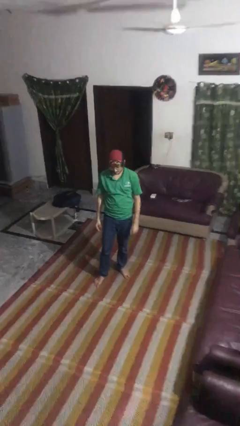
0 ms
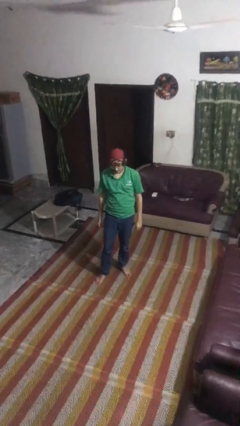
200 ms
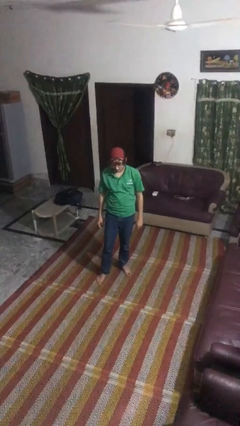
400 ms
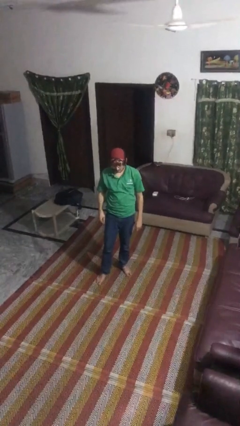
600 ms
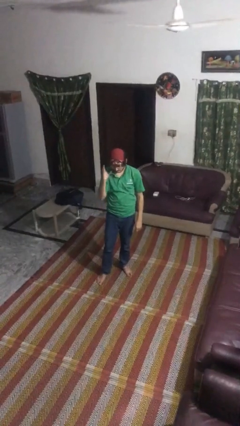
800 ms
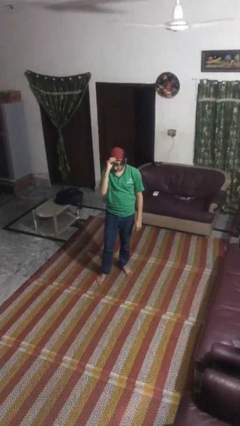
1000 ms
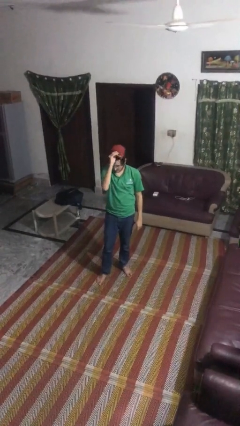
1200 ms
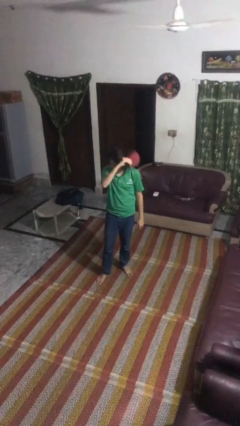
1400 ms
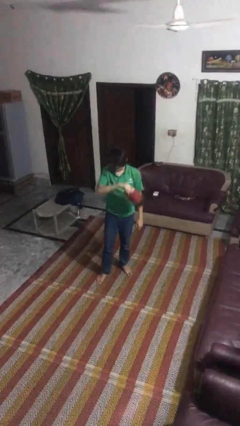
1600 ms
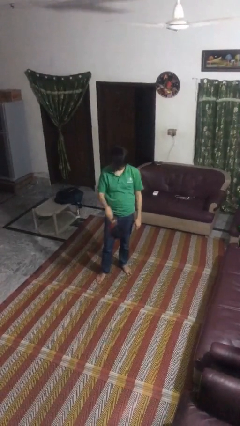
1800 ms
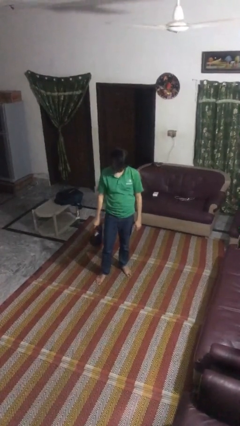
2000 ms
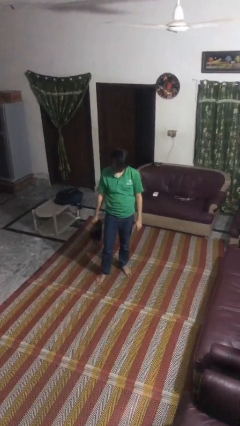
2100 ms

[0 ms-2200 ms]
person takes off hat

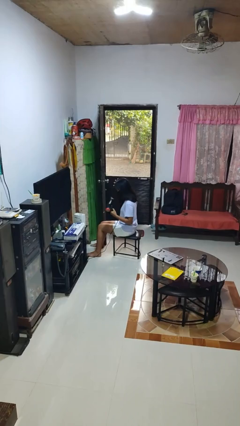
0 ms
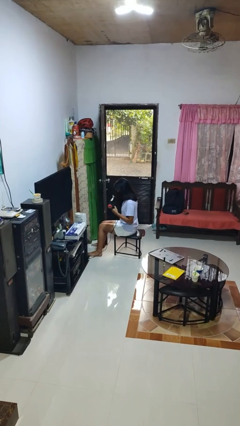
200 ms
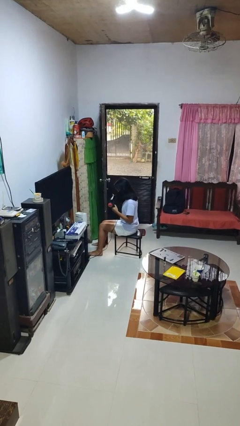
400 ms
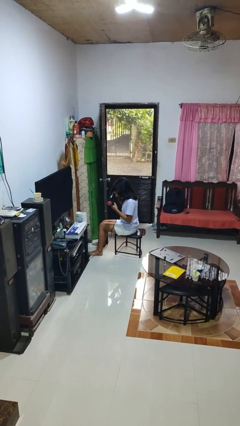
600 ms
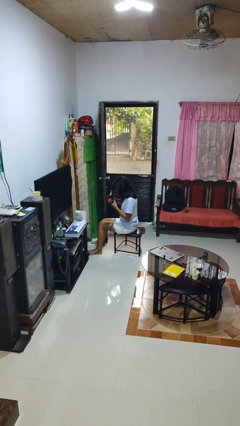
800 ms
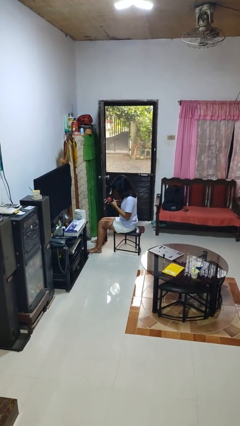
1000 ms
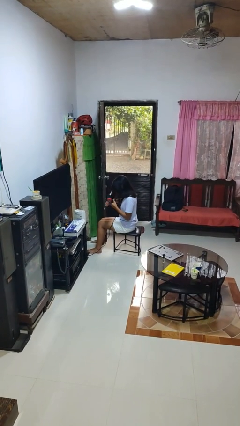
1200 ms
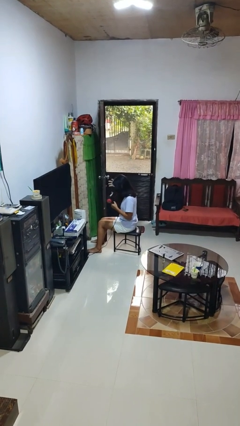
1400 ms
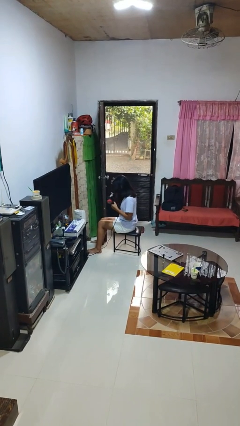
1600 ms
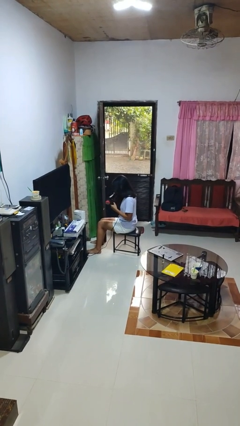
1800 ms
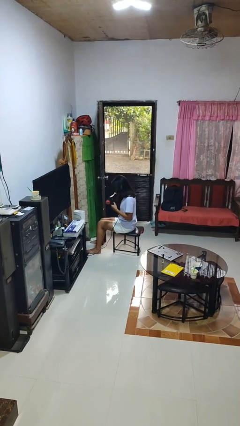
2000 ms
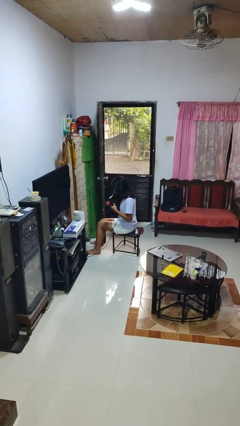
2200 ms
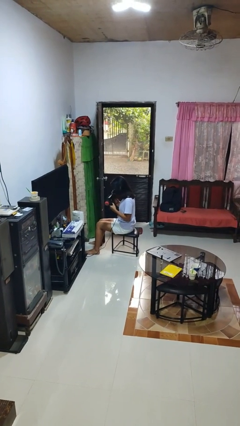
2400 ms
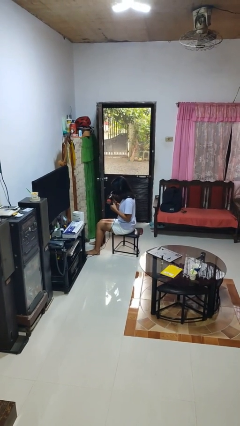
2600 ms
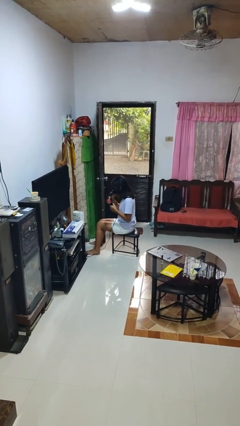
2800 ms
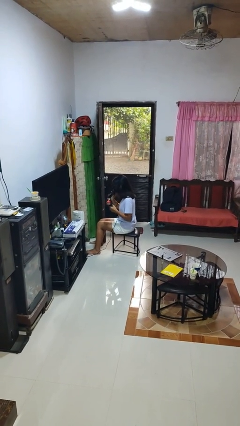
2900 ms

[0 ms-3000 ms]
person dries hair with hairdryer

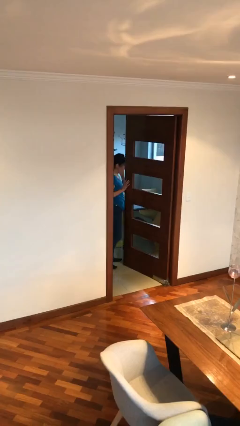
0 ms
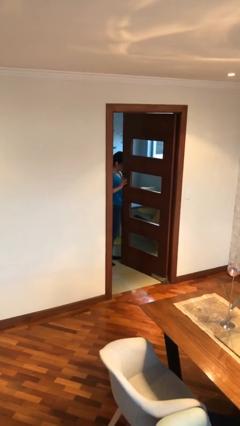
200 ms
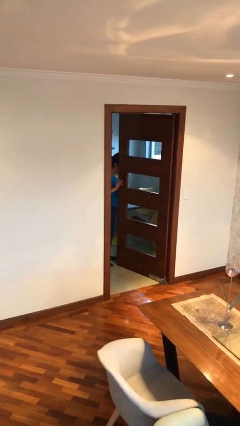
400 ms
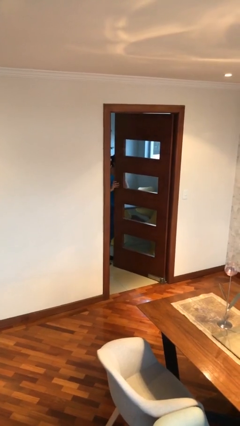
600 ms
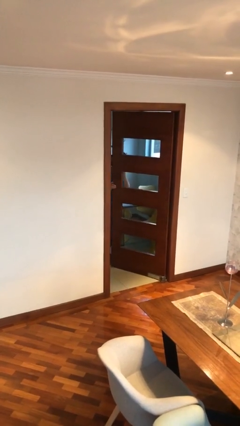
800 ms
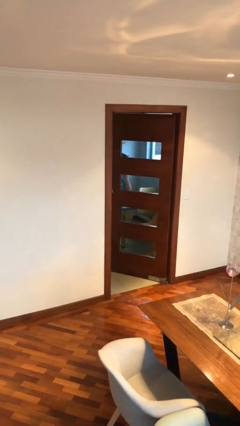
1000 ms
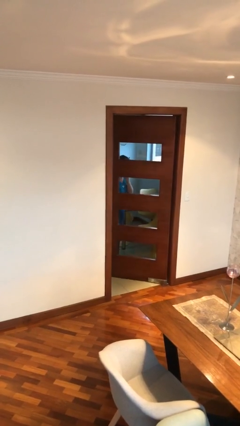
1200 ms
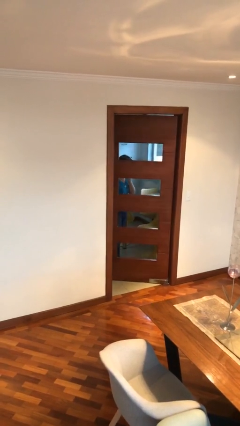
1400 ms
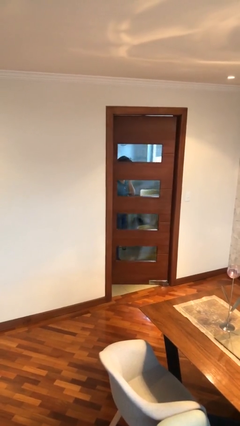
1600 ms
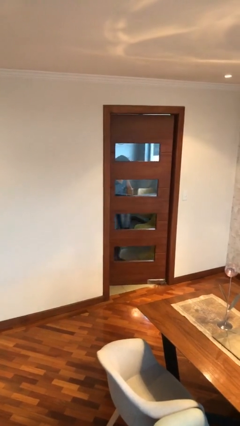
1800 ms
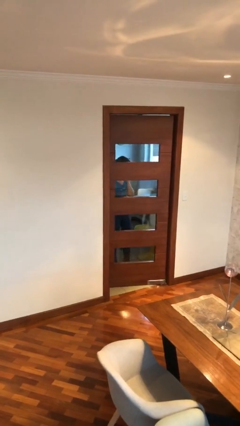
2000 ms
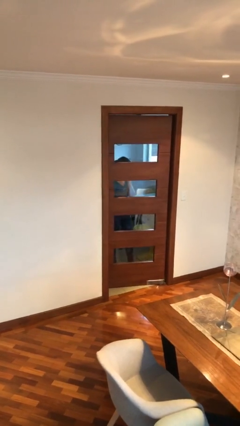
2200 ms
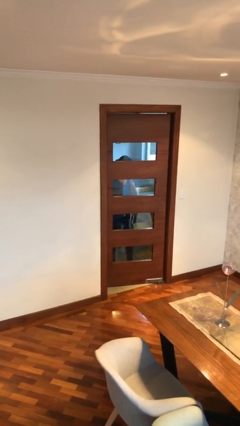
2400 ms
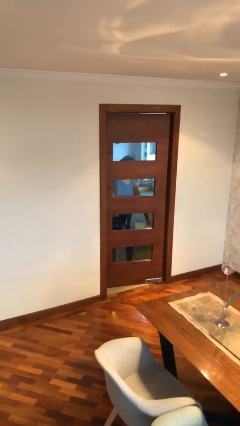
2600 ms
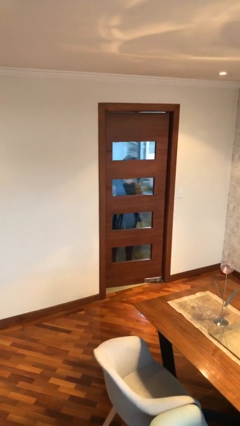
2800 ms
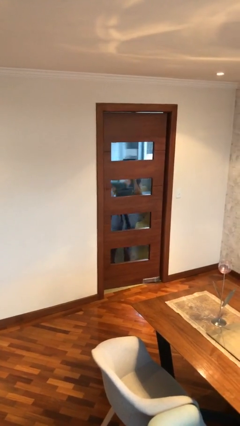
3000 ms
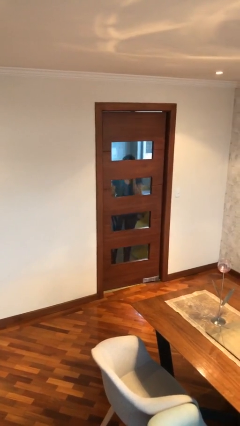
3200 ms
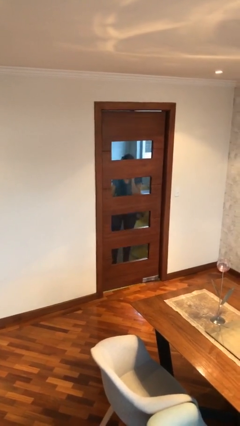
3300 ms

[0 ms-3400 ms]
person closes facility door

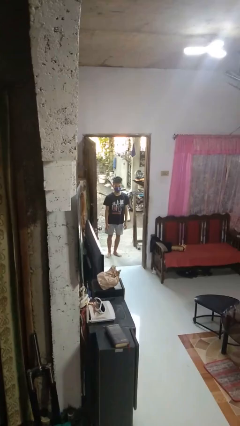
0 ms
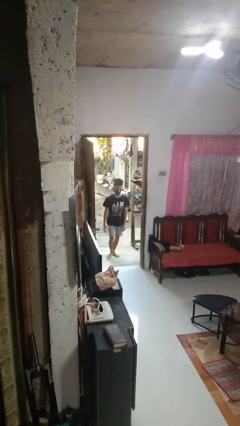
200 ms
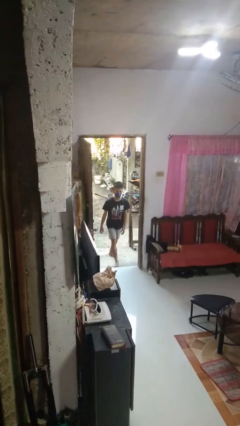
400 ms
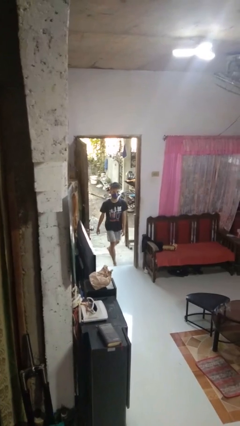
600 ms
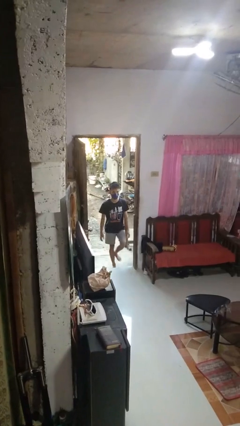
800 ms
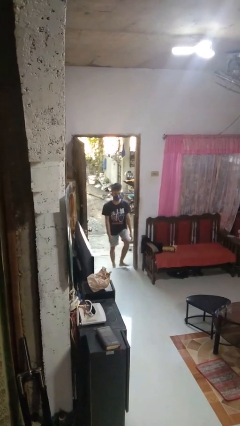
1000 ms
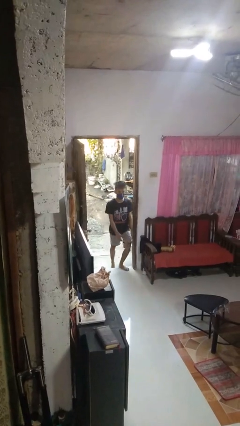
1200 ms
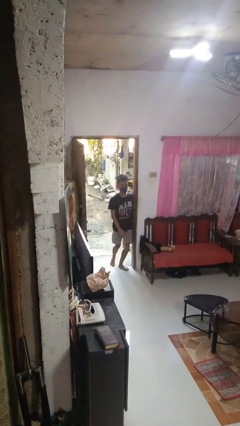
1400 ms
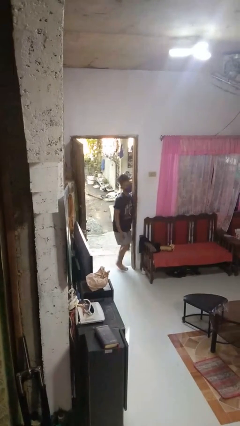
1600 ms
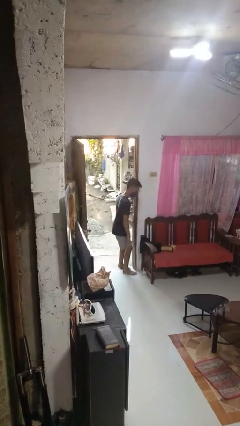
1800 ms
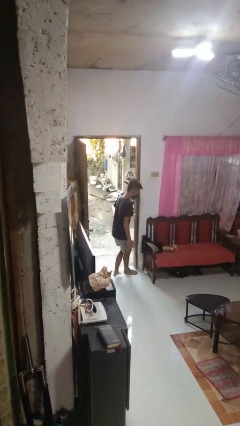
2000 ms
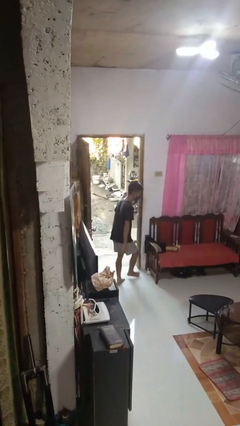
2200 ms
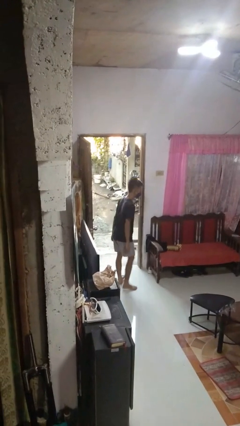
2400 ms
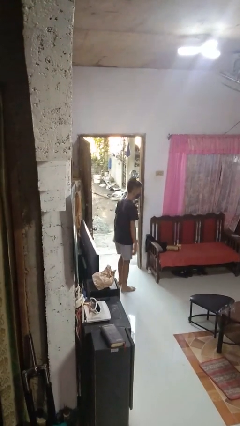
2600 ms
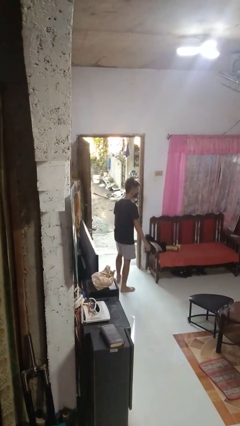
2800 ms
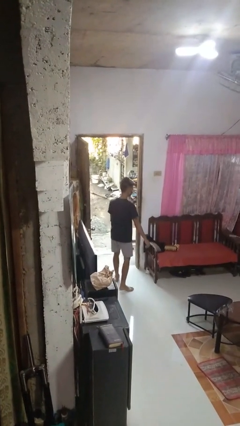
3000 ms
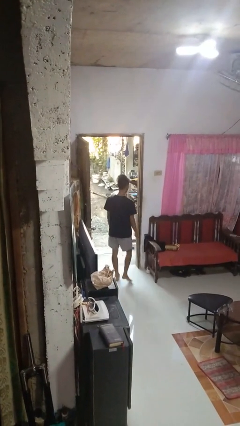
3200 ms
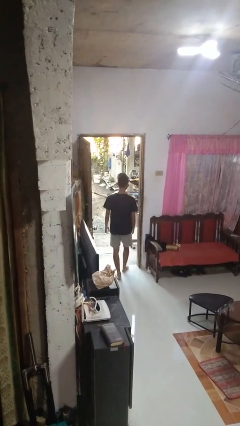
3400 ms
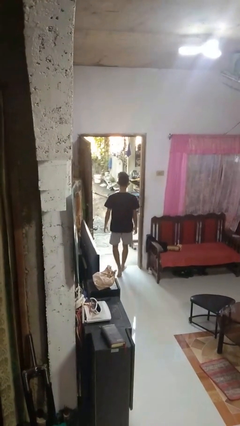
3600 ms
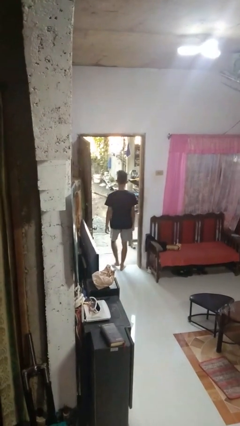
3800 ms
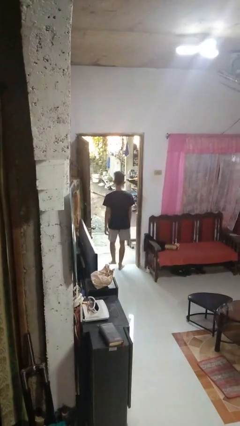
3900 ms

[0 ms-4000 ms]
person bumps into wall

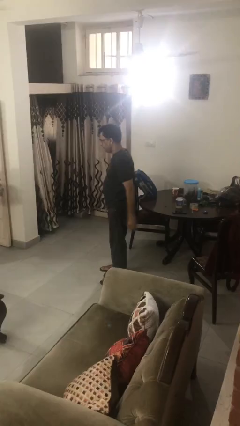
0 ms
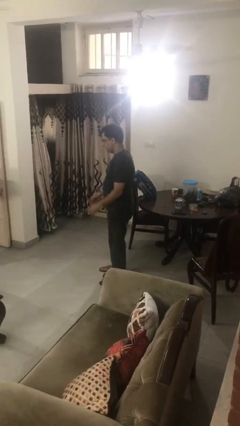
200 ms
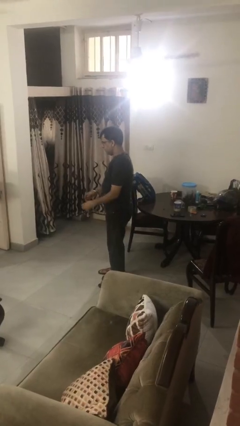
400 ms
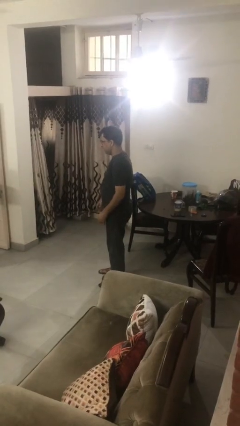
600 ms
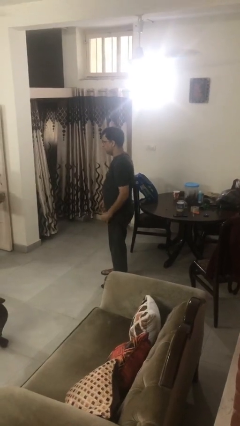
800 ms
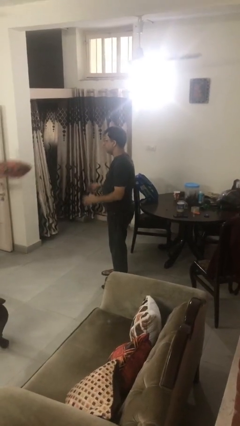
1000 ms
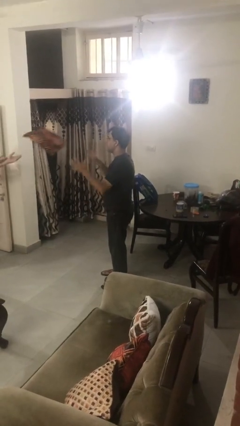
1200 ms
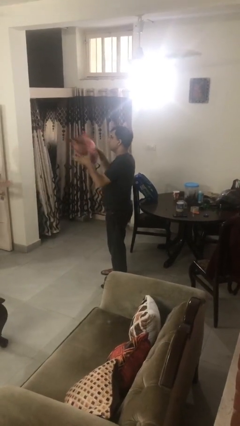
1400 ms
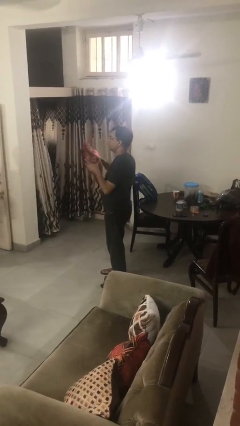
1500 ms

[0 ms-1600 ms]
person catches object from person

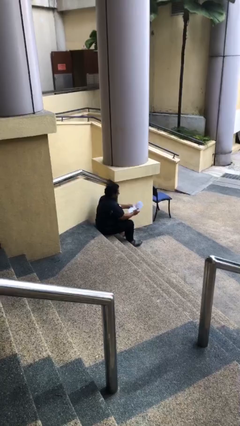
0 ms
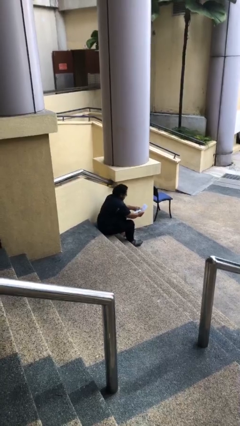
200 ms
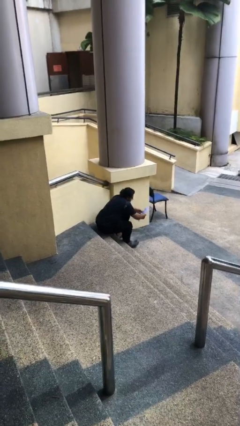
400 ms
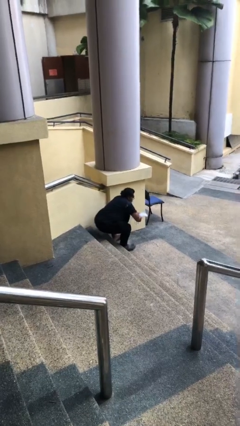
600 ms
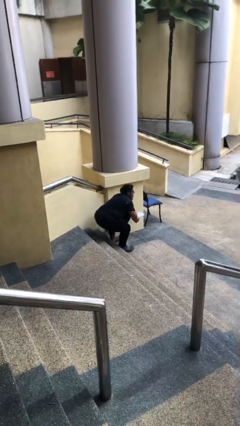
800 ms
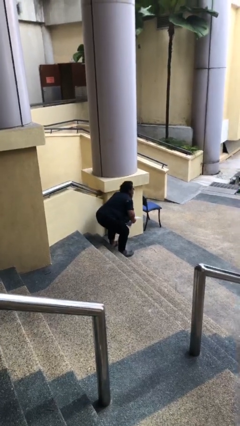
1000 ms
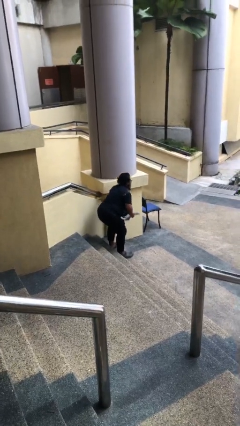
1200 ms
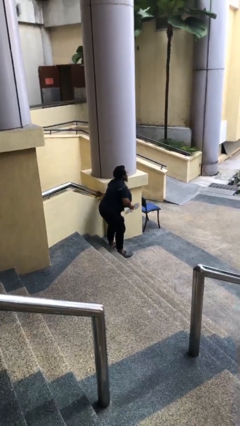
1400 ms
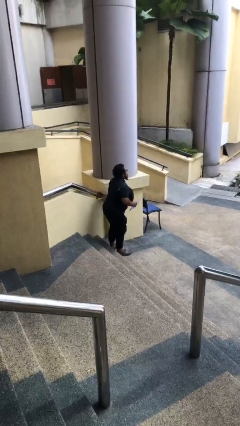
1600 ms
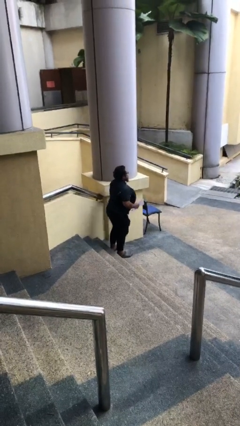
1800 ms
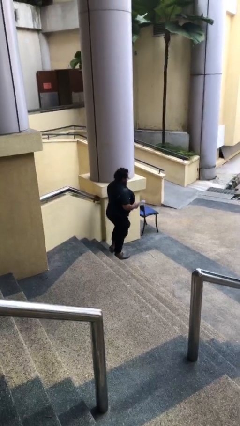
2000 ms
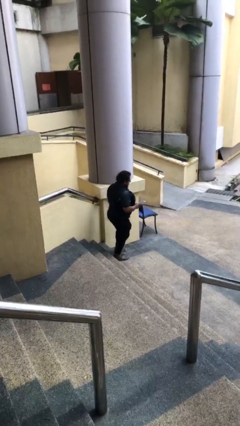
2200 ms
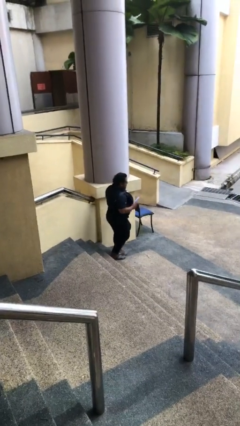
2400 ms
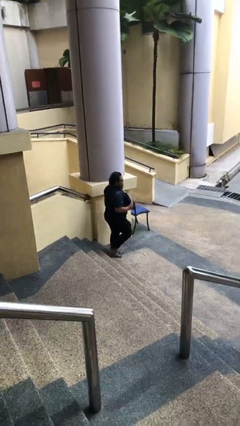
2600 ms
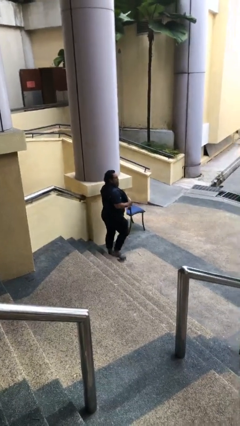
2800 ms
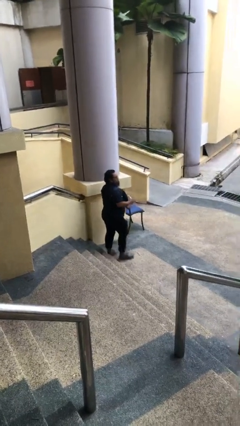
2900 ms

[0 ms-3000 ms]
person stands up
